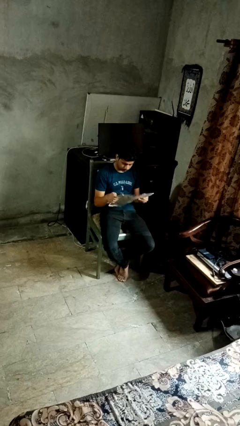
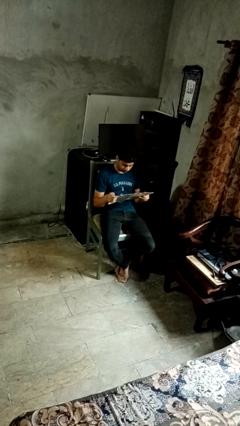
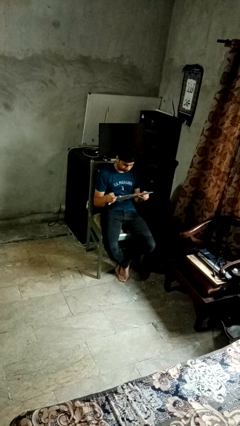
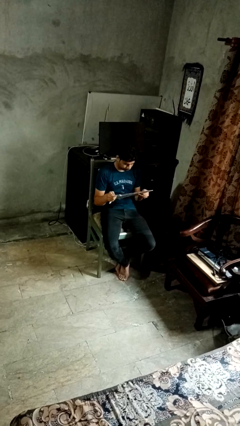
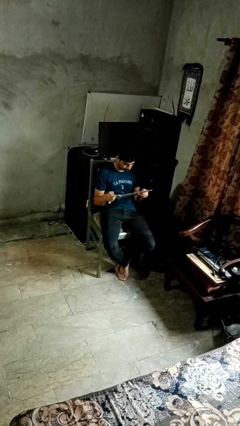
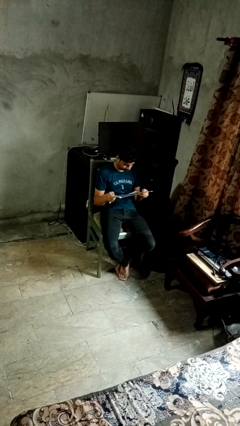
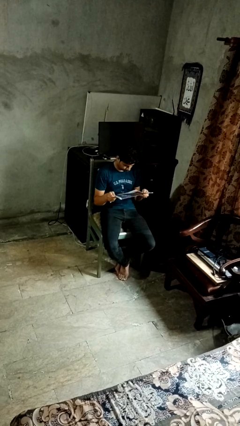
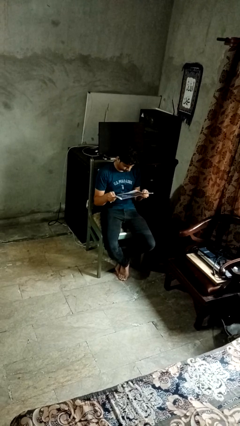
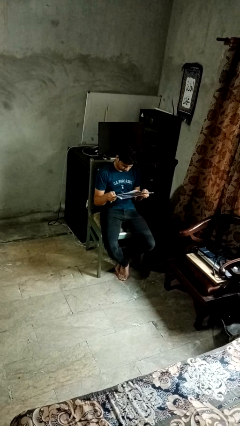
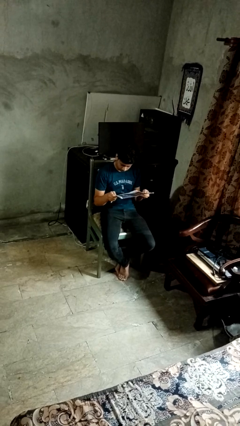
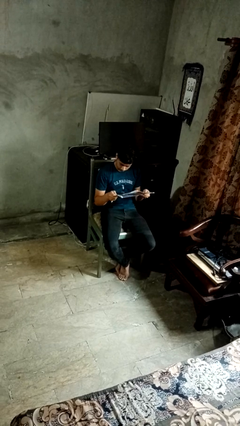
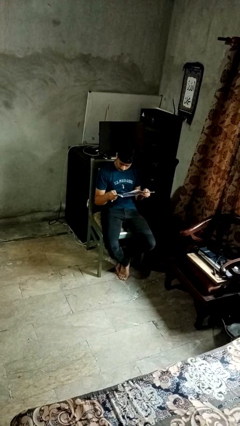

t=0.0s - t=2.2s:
person reads magazine

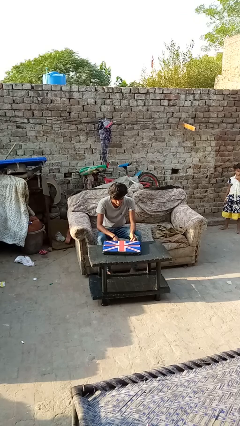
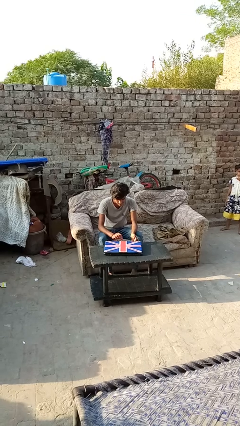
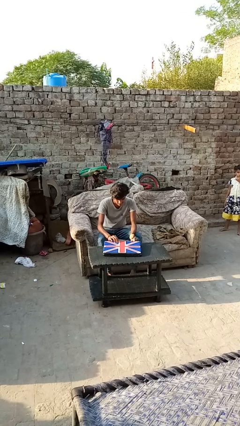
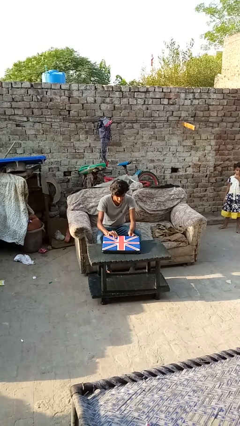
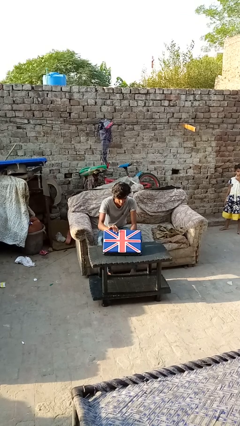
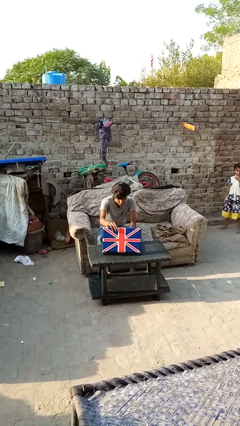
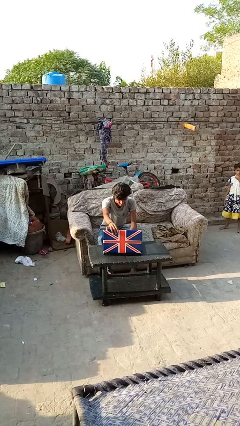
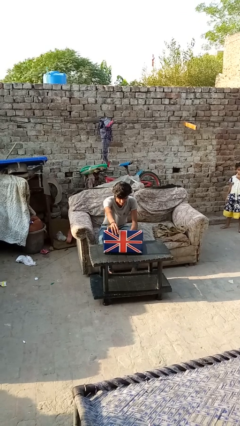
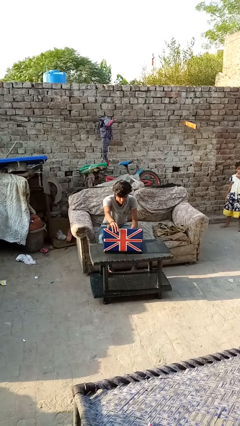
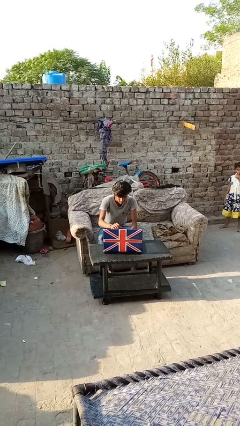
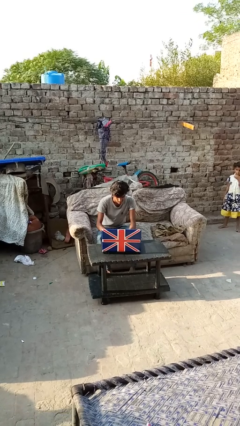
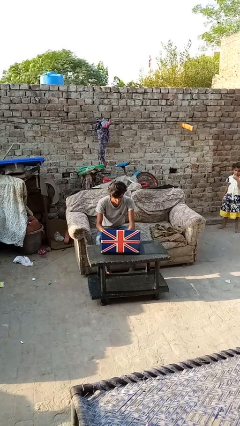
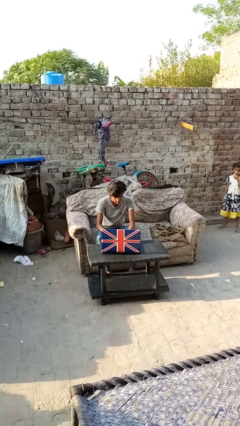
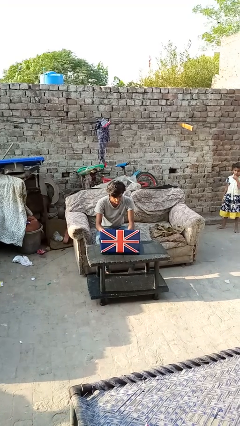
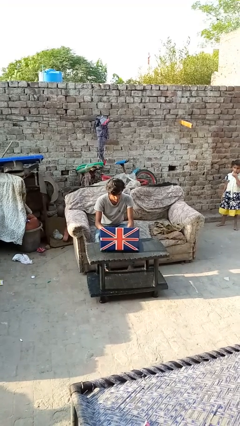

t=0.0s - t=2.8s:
person opens laptop

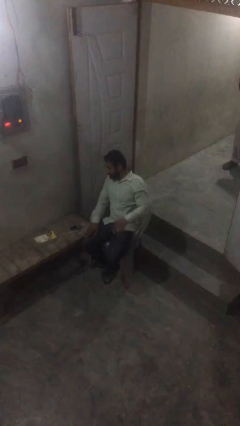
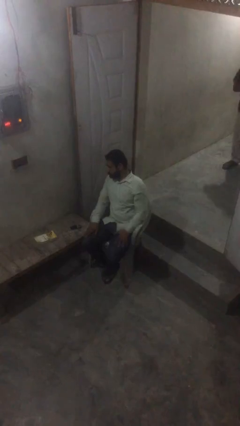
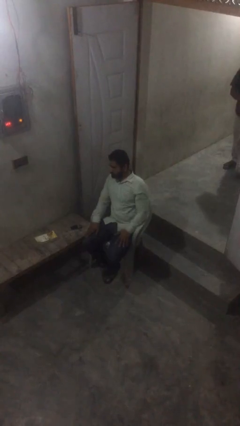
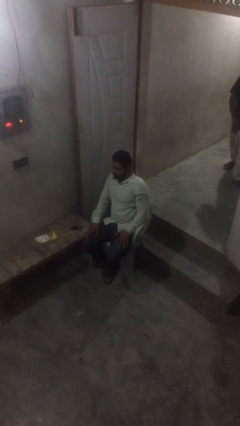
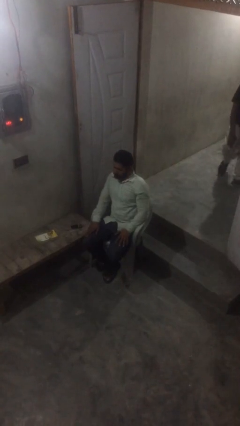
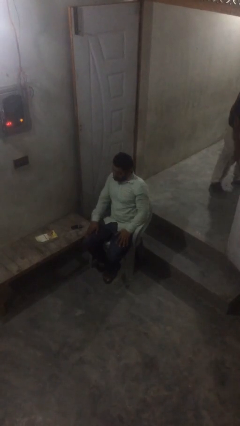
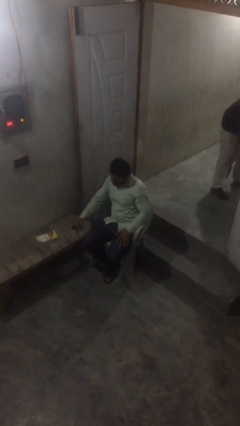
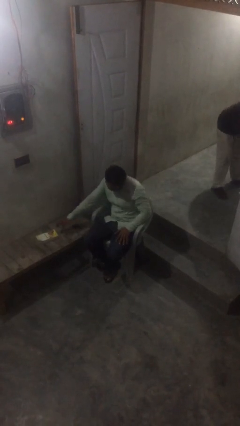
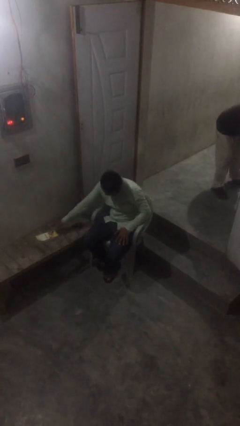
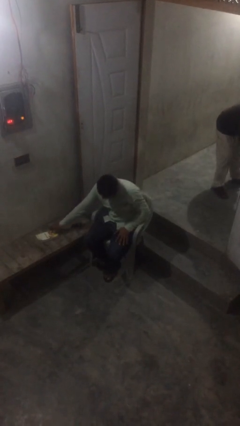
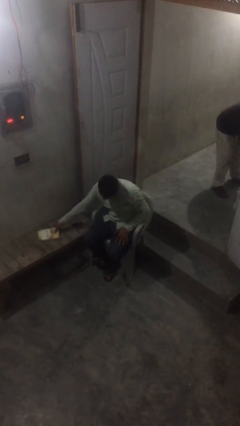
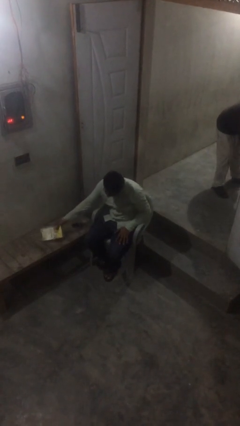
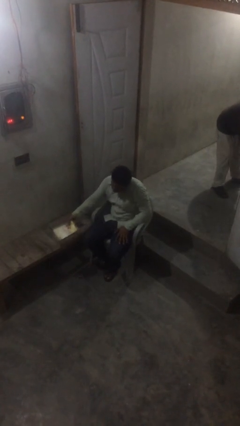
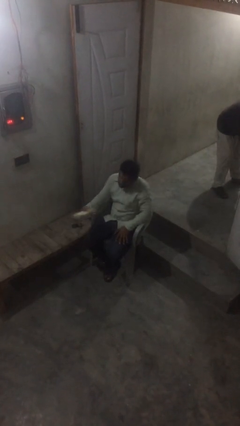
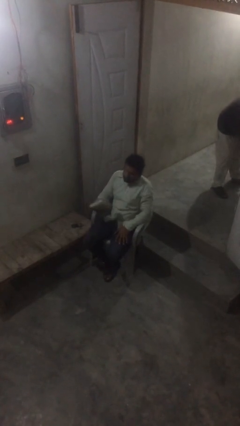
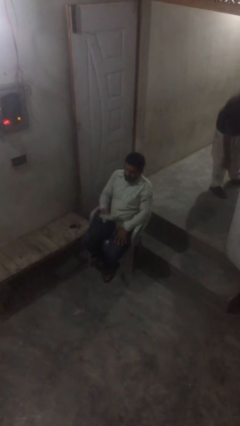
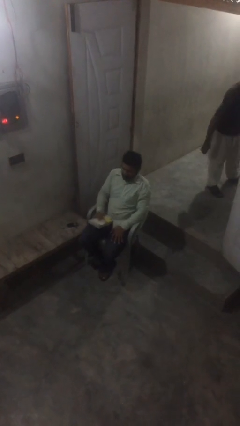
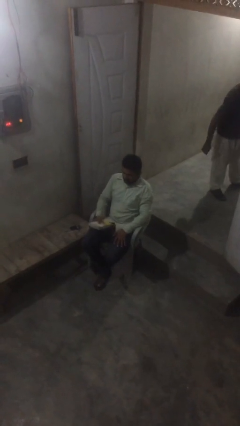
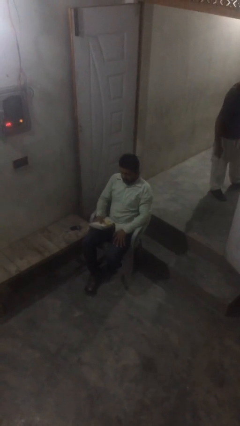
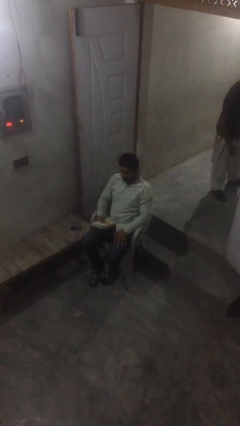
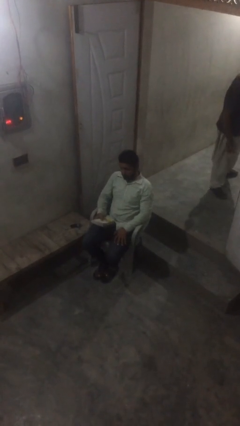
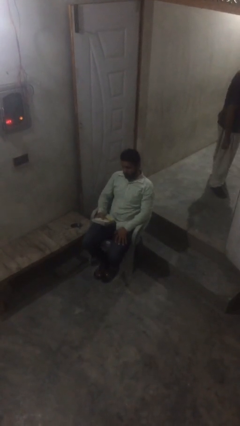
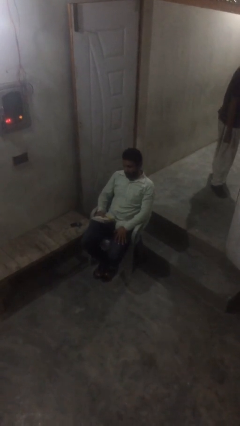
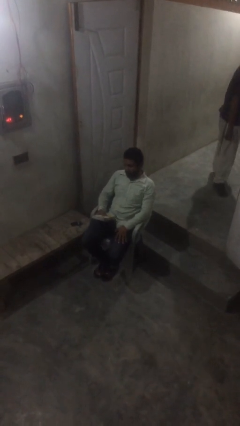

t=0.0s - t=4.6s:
person picks up object from table

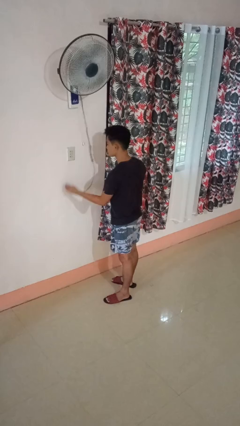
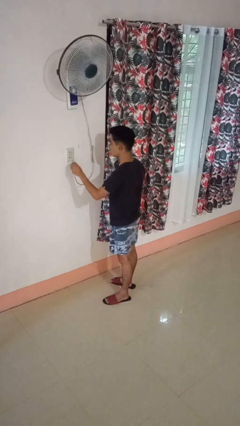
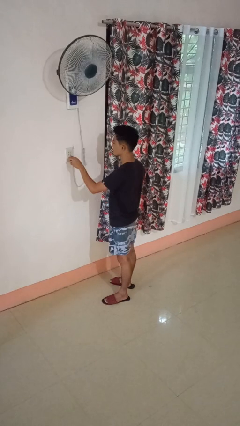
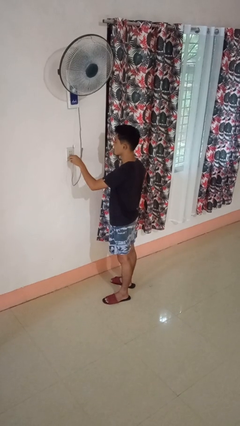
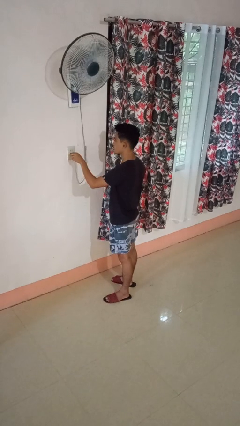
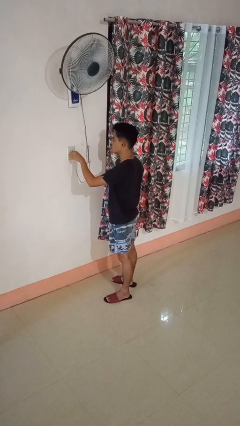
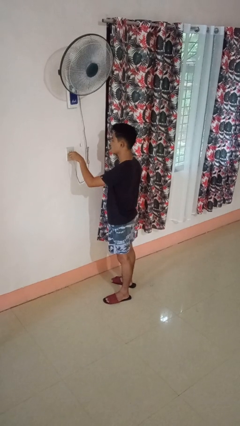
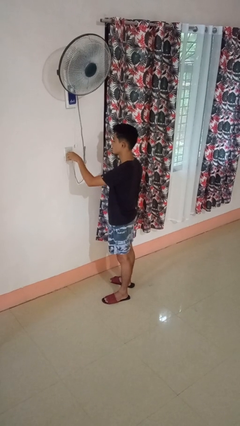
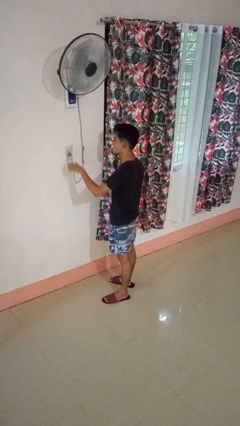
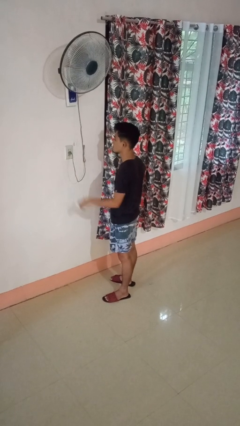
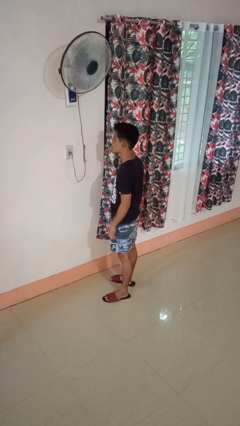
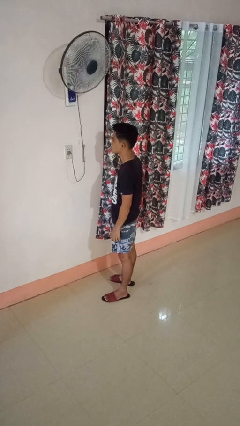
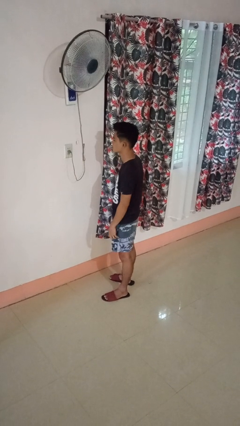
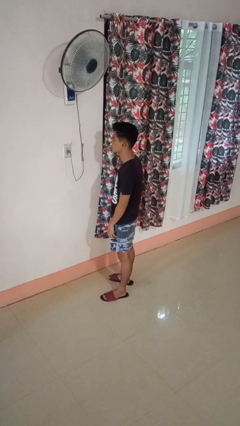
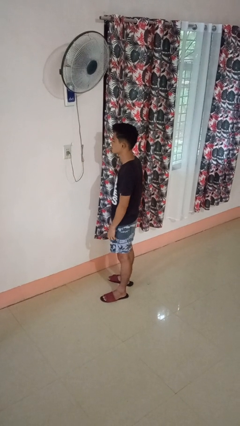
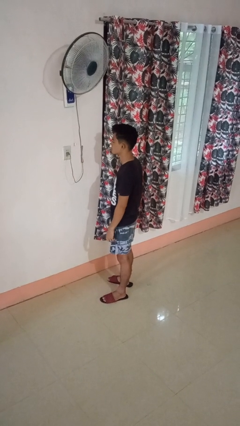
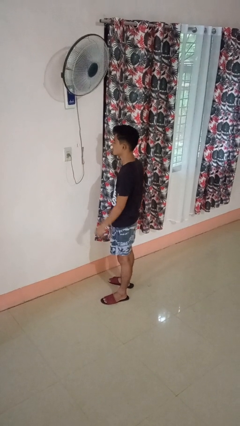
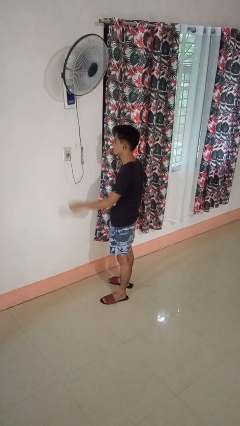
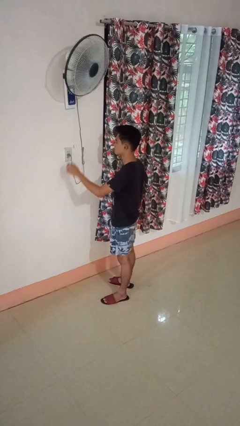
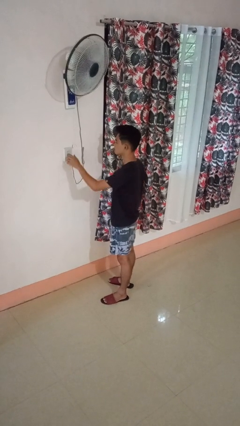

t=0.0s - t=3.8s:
person plugs into electrical socket

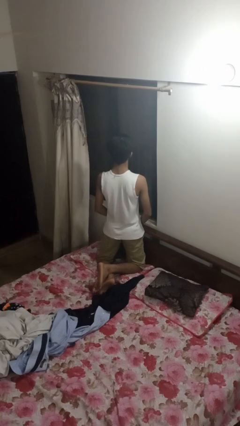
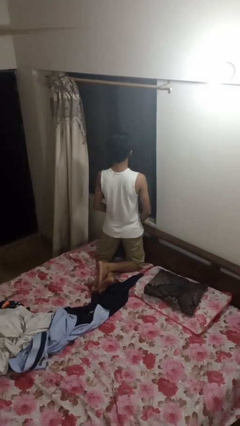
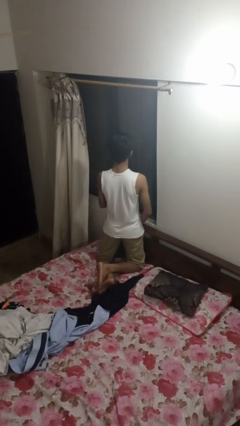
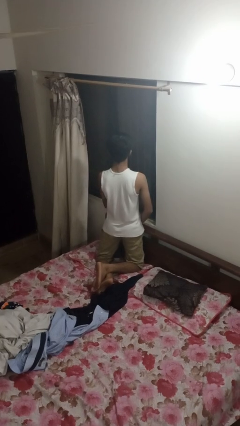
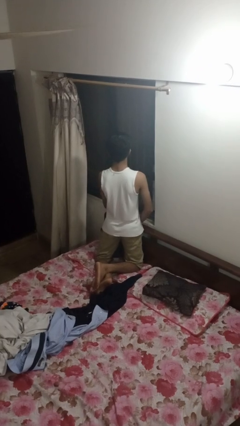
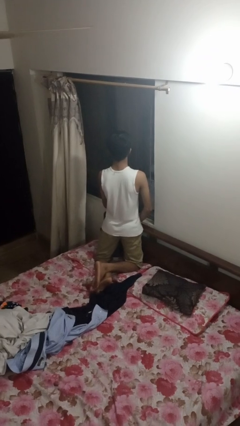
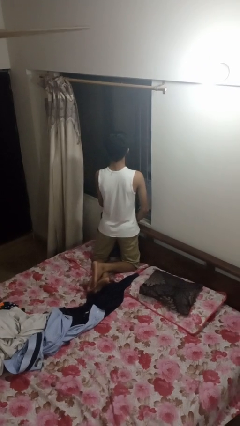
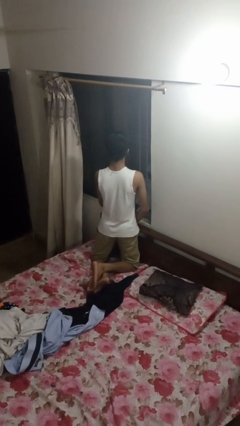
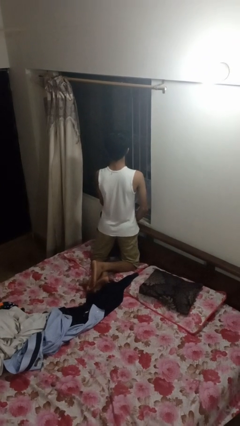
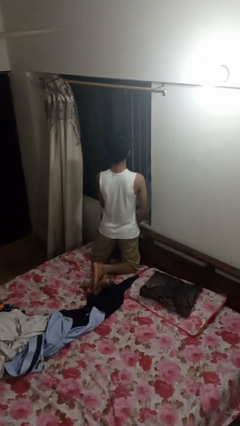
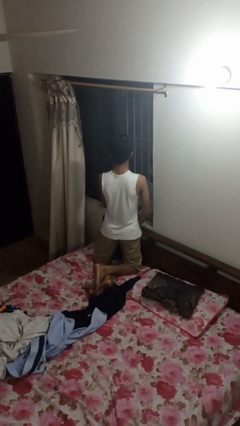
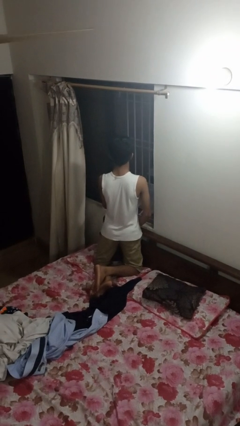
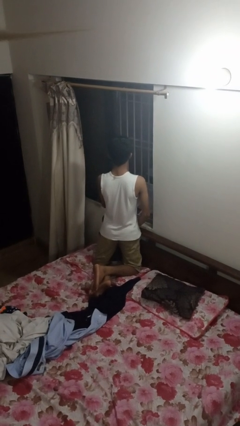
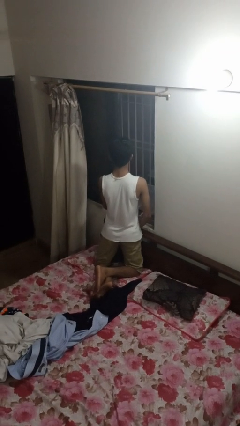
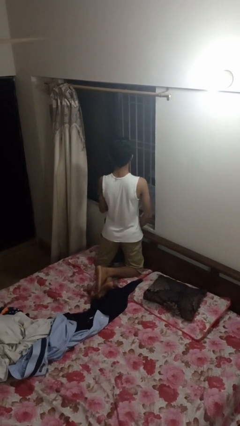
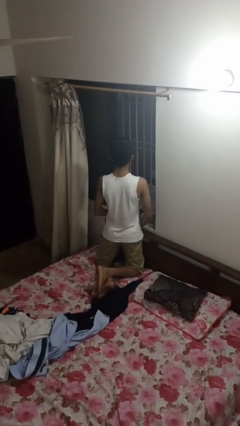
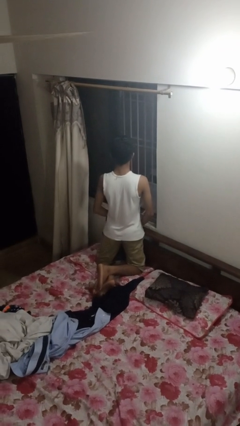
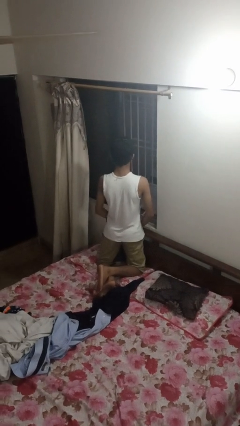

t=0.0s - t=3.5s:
person opens home window

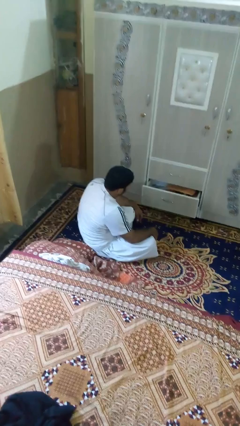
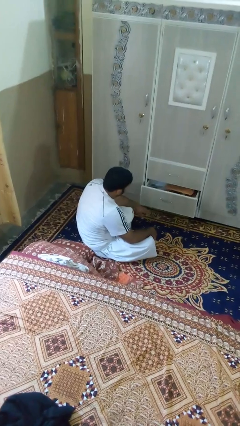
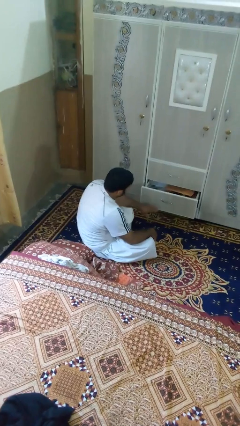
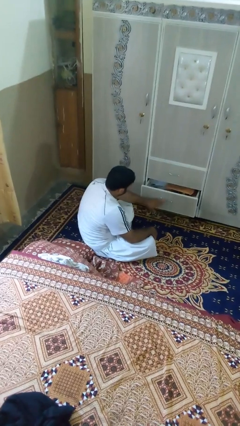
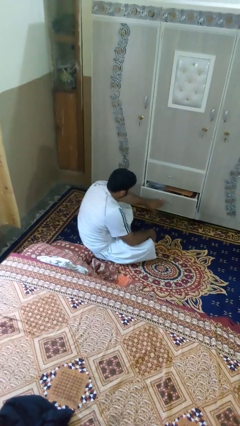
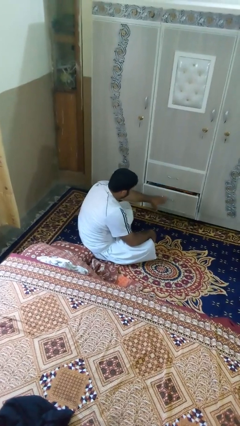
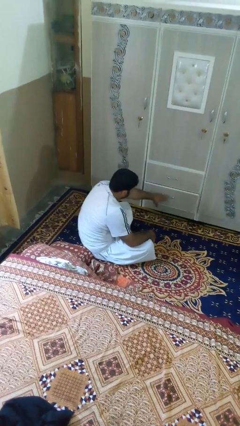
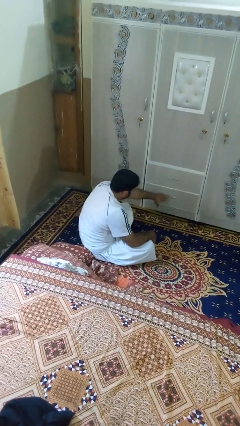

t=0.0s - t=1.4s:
person closes dresser drawer
